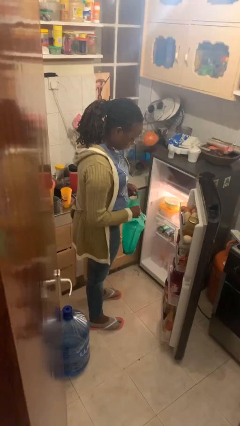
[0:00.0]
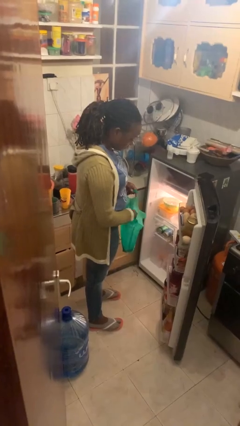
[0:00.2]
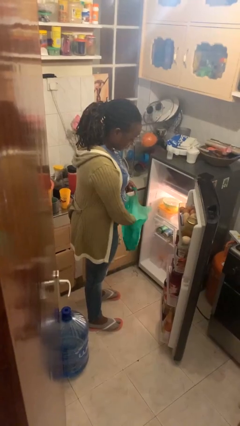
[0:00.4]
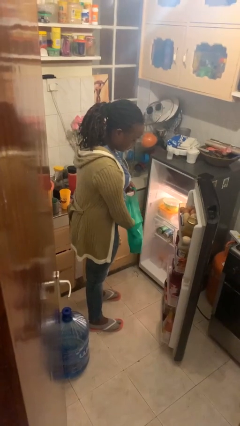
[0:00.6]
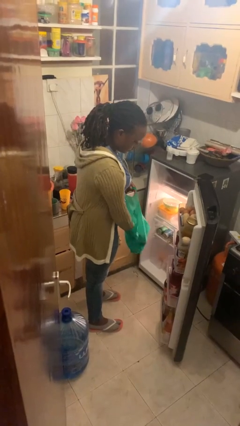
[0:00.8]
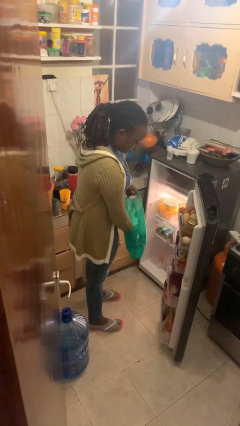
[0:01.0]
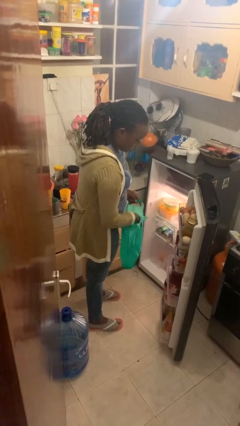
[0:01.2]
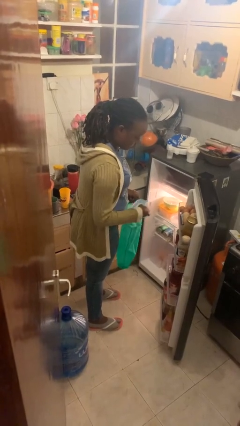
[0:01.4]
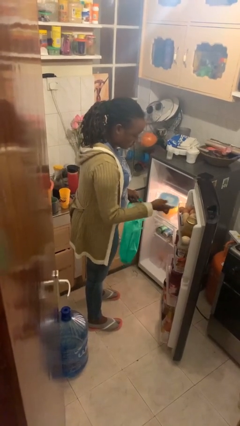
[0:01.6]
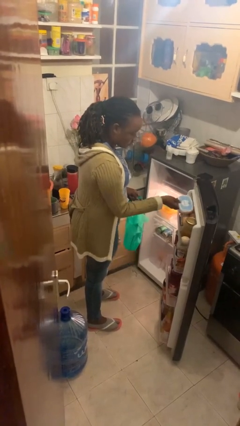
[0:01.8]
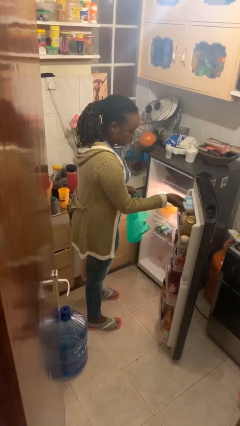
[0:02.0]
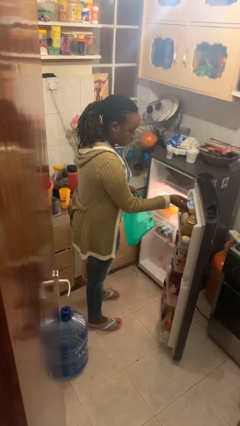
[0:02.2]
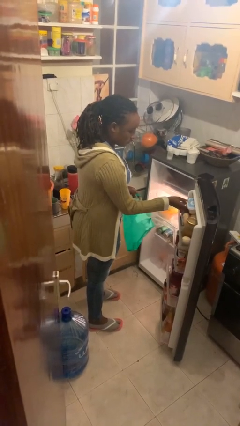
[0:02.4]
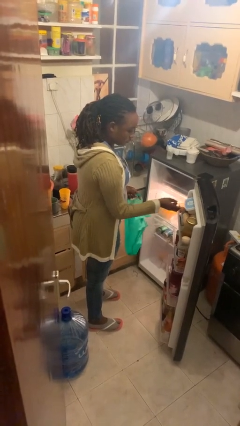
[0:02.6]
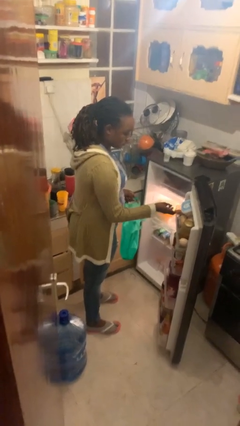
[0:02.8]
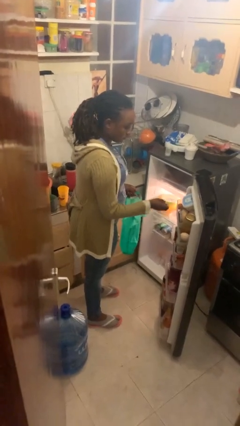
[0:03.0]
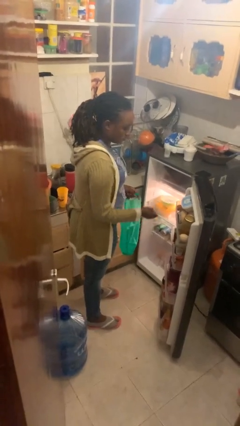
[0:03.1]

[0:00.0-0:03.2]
person loads groceries into refrigerator

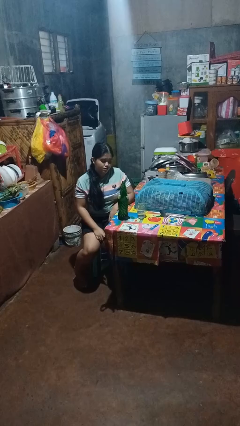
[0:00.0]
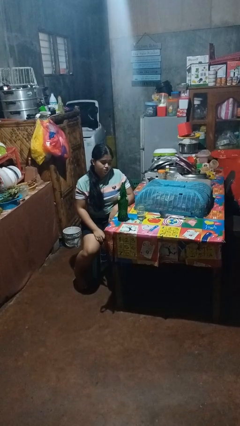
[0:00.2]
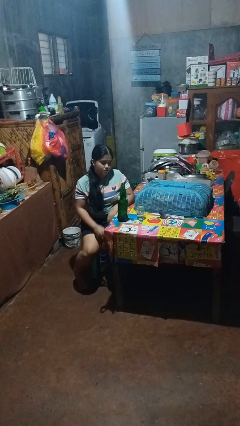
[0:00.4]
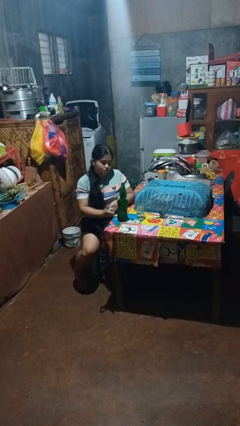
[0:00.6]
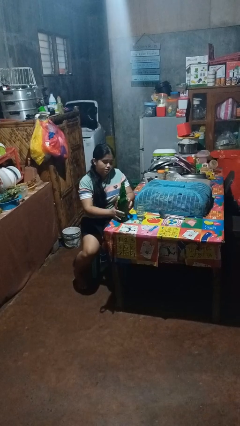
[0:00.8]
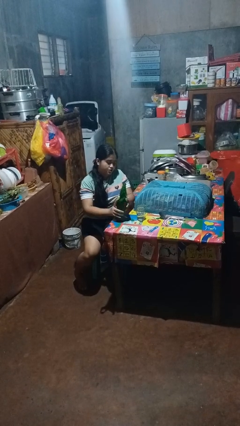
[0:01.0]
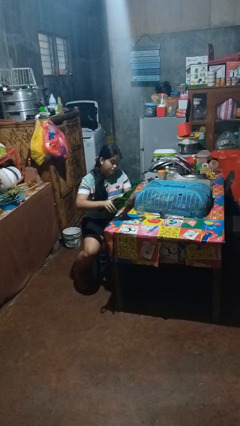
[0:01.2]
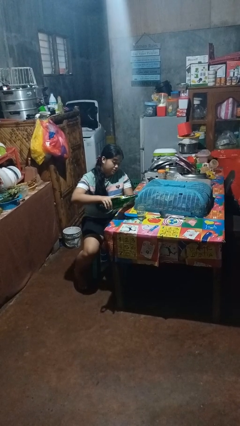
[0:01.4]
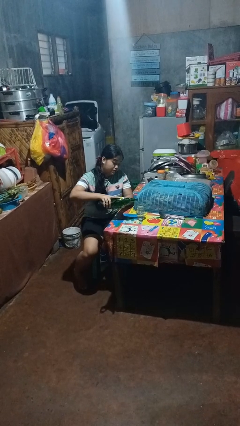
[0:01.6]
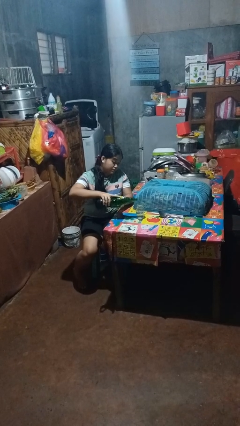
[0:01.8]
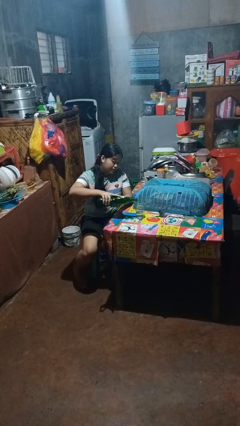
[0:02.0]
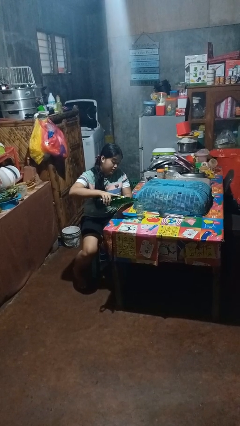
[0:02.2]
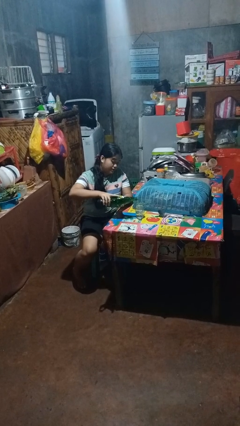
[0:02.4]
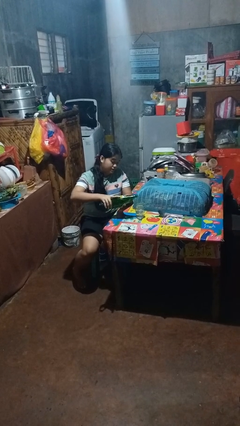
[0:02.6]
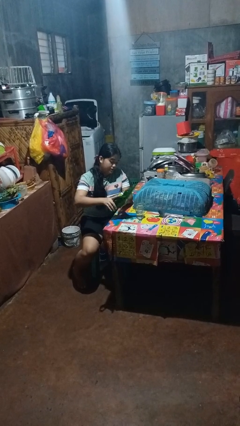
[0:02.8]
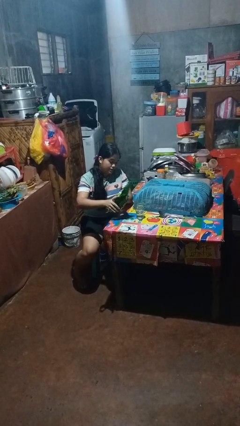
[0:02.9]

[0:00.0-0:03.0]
person pours liquid into cup

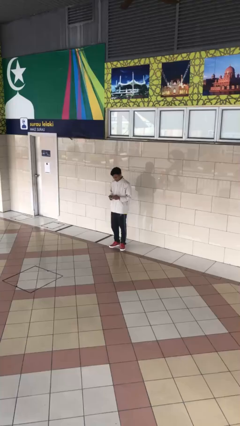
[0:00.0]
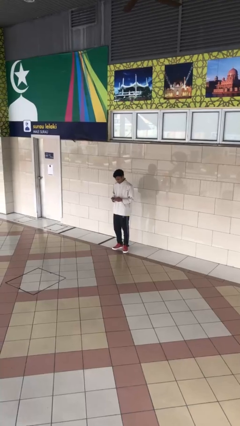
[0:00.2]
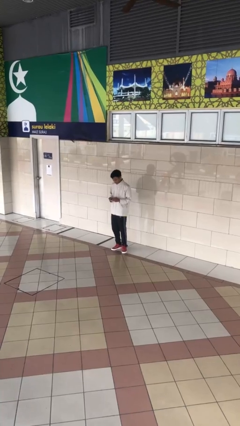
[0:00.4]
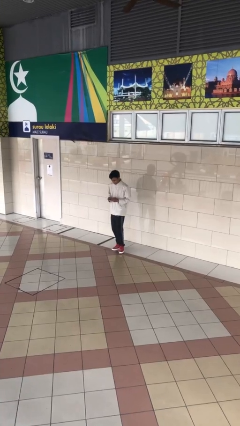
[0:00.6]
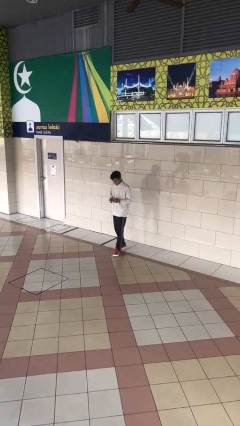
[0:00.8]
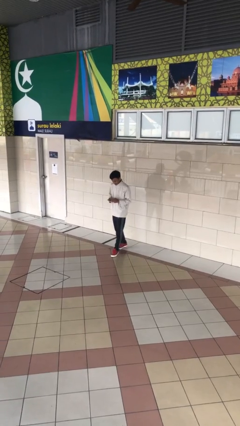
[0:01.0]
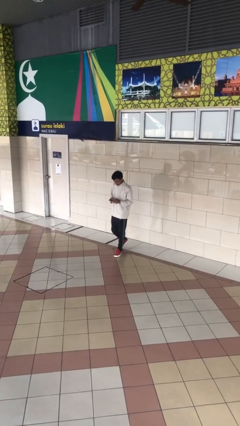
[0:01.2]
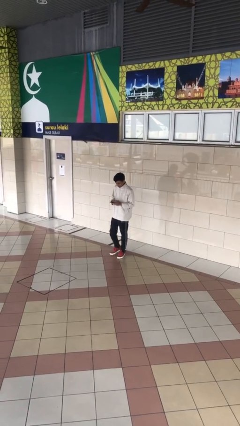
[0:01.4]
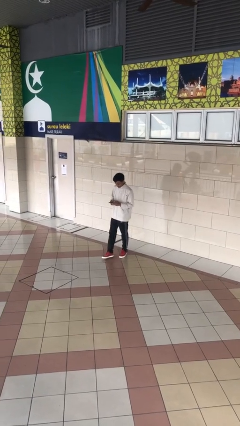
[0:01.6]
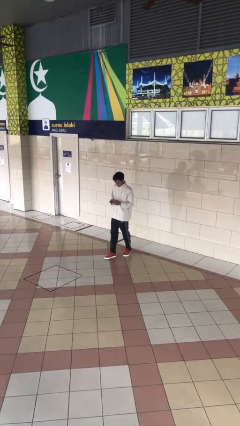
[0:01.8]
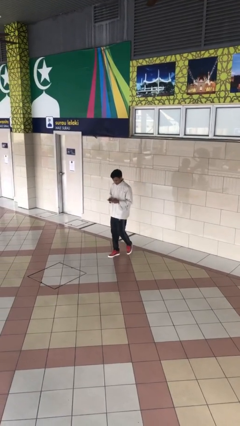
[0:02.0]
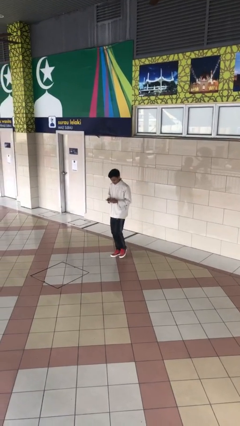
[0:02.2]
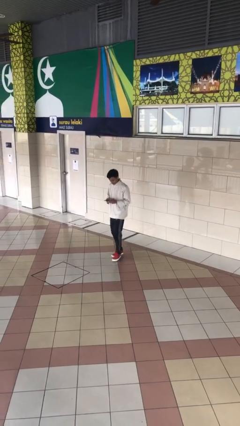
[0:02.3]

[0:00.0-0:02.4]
person texts on phone

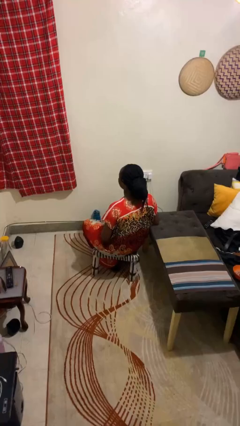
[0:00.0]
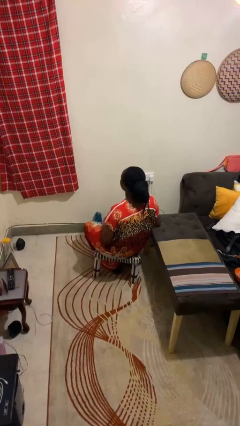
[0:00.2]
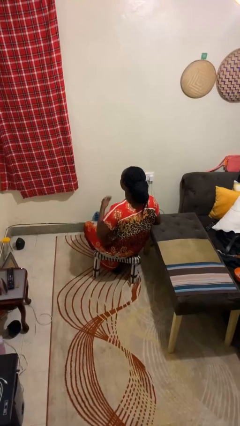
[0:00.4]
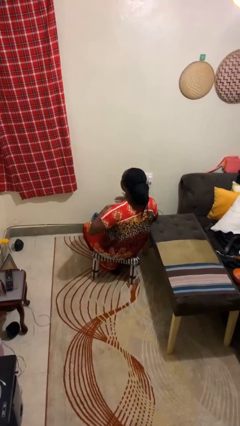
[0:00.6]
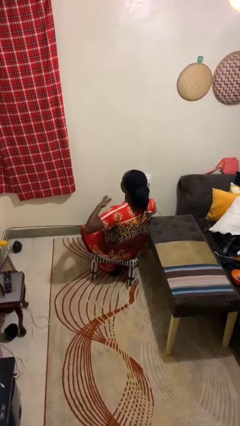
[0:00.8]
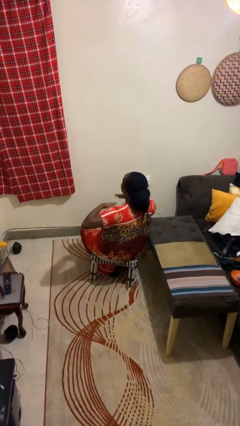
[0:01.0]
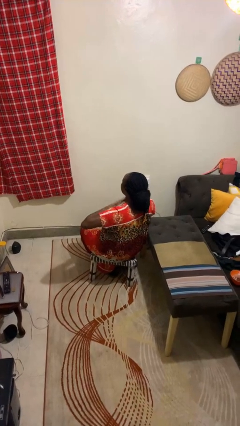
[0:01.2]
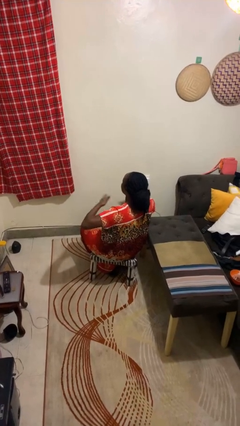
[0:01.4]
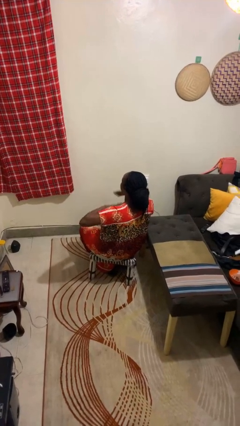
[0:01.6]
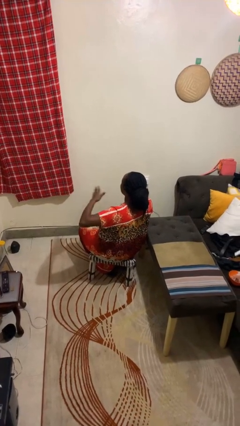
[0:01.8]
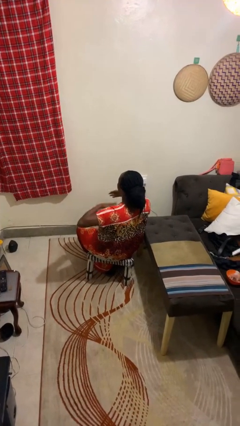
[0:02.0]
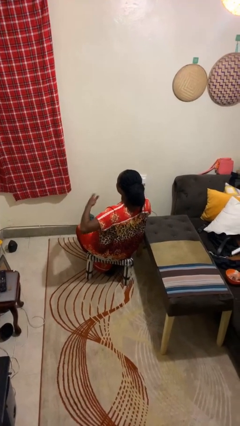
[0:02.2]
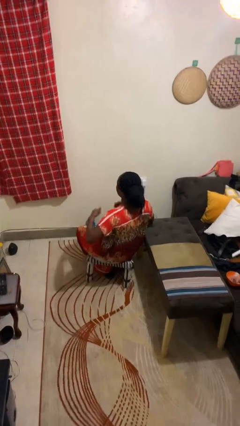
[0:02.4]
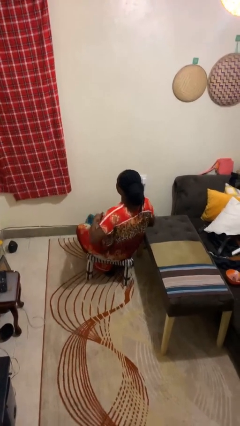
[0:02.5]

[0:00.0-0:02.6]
person drums on chest

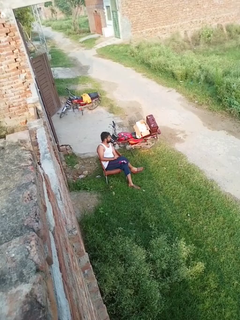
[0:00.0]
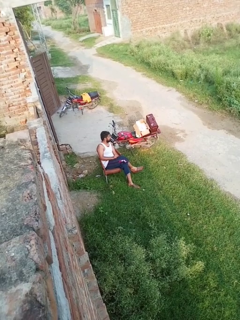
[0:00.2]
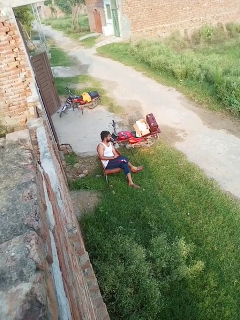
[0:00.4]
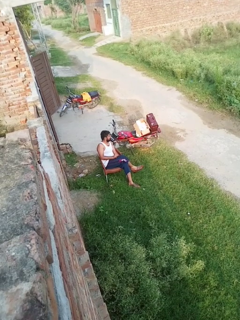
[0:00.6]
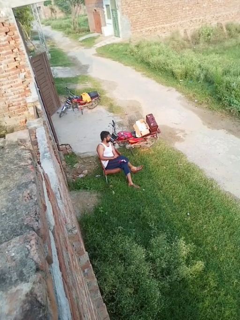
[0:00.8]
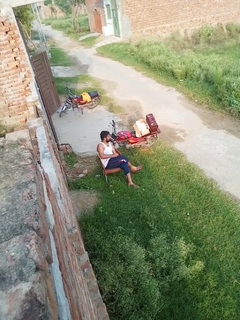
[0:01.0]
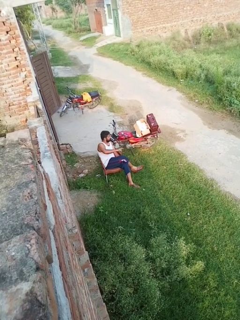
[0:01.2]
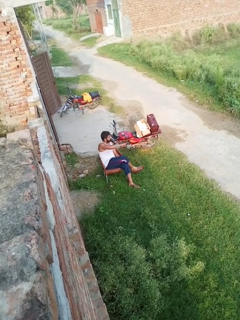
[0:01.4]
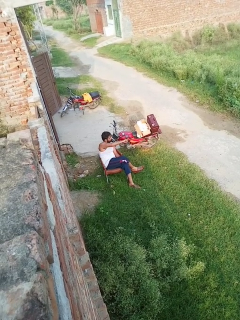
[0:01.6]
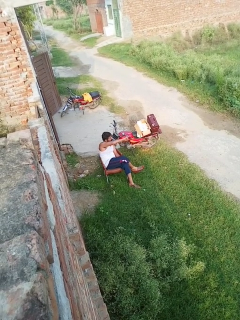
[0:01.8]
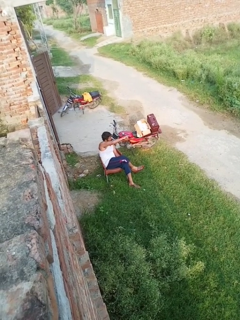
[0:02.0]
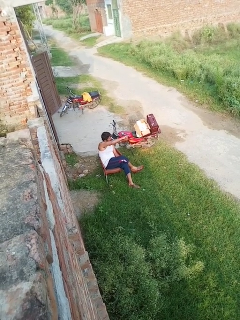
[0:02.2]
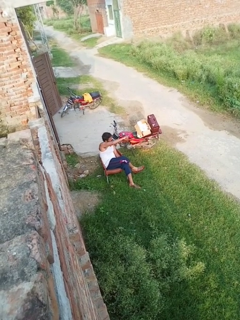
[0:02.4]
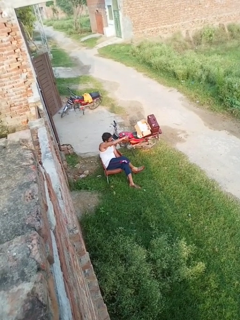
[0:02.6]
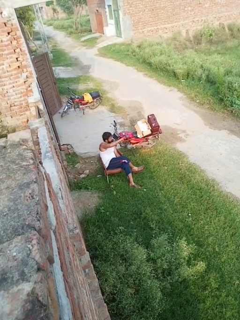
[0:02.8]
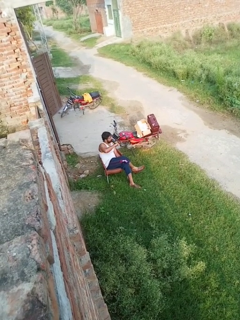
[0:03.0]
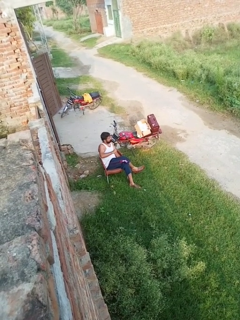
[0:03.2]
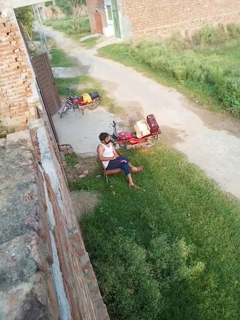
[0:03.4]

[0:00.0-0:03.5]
person points at person

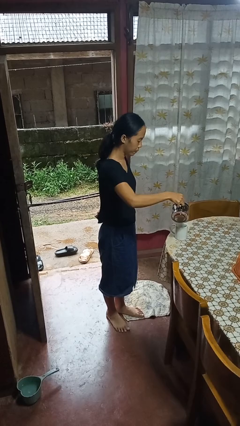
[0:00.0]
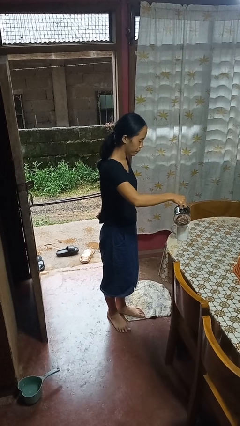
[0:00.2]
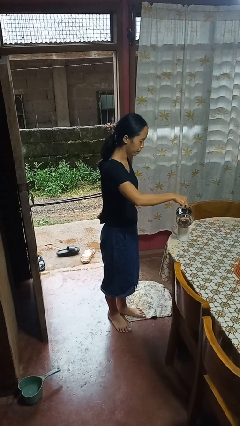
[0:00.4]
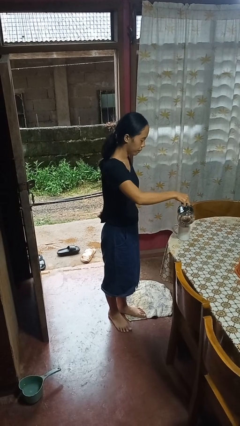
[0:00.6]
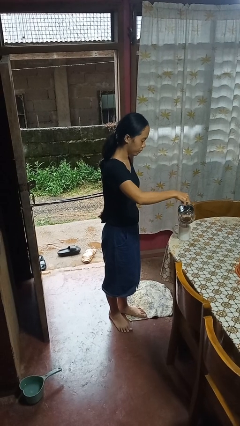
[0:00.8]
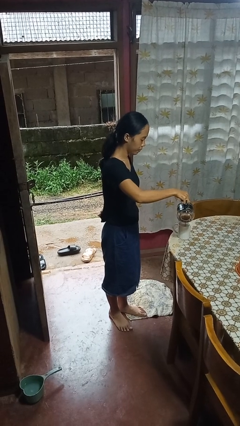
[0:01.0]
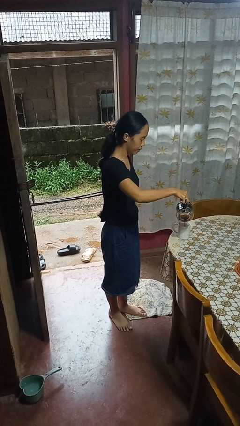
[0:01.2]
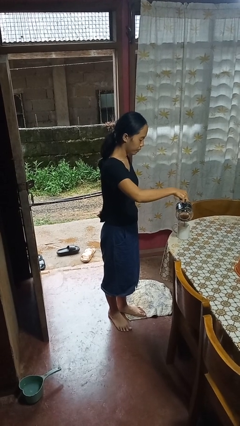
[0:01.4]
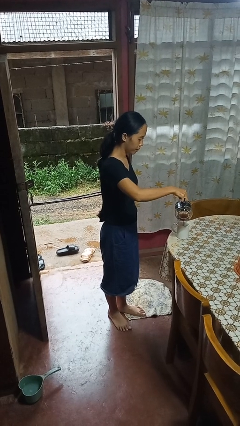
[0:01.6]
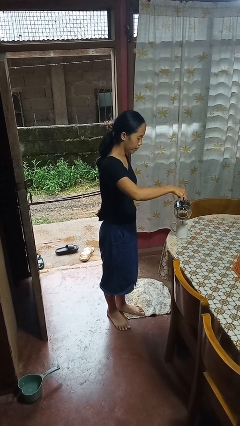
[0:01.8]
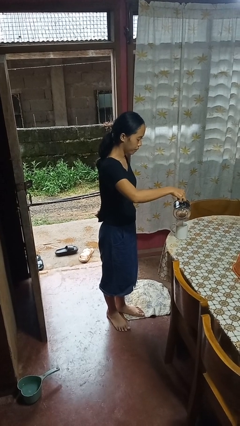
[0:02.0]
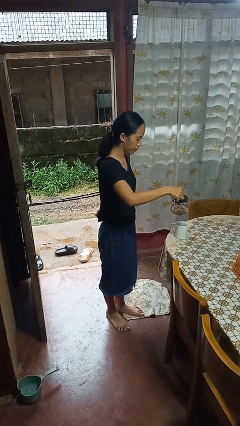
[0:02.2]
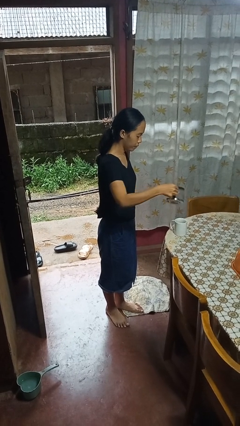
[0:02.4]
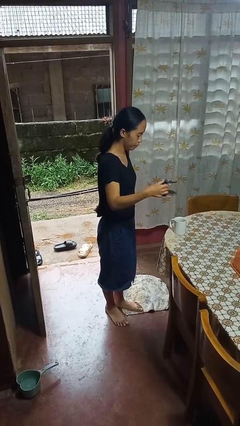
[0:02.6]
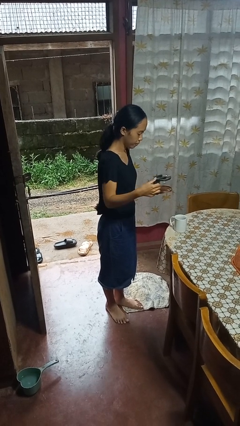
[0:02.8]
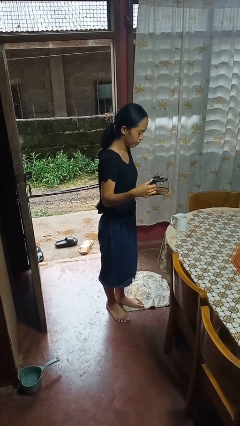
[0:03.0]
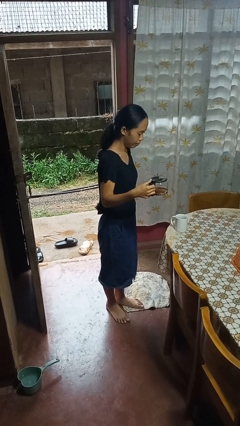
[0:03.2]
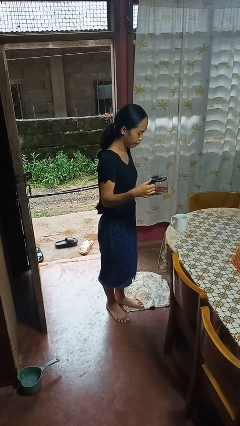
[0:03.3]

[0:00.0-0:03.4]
person pours coffee into mug
